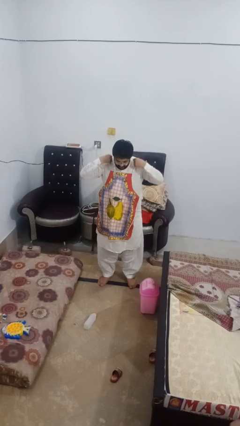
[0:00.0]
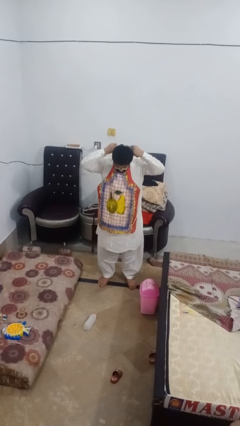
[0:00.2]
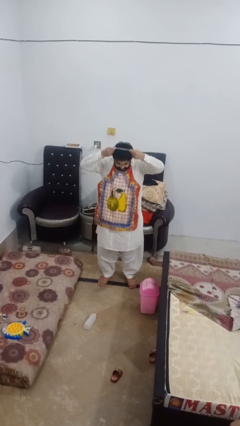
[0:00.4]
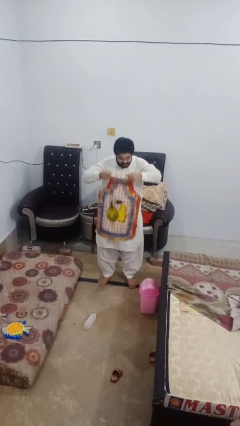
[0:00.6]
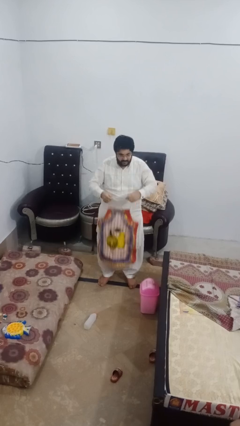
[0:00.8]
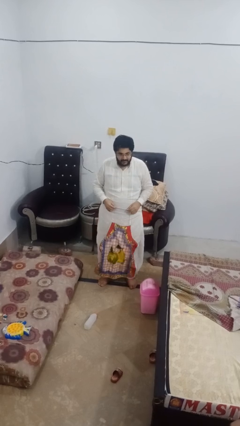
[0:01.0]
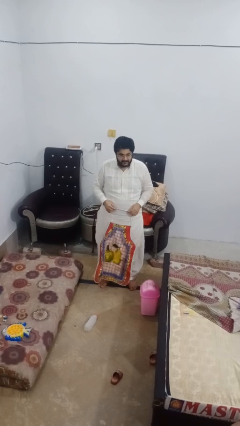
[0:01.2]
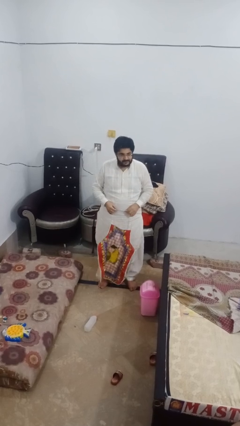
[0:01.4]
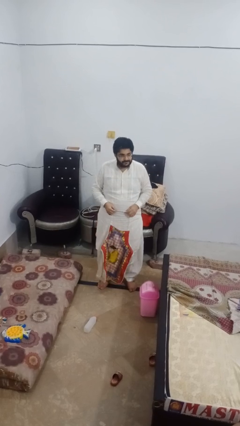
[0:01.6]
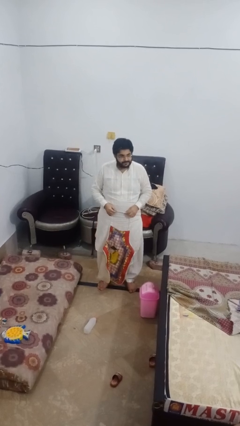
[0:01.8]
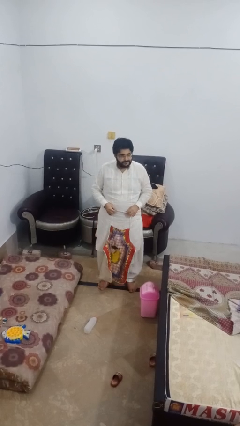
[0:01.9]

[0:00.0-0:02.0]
person takes off apron

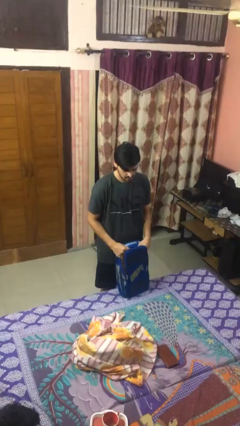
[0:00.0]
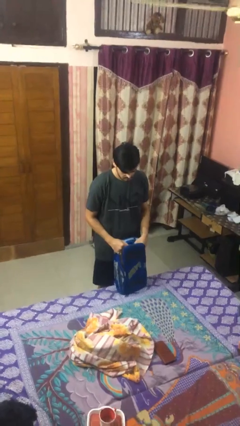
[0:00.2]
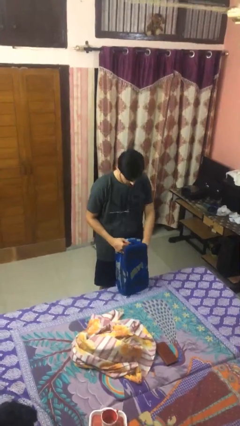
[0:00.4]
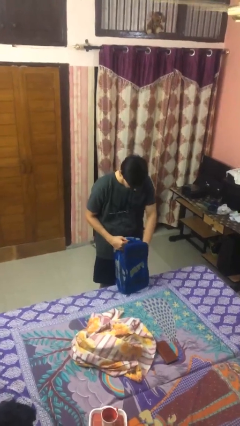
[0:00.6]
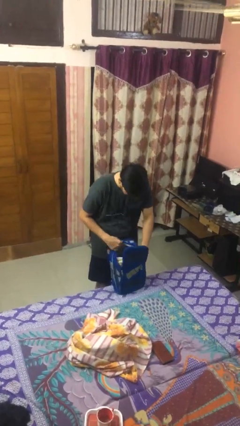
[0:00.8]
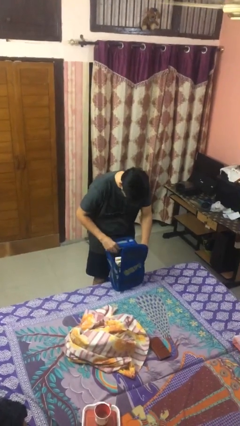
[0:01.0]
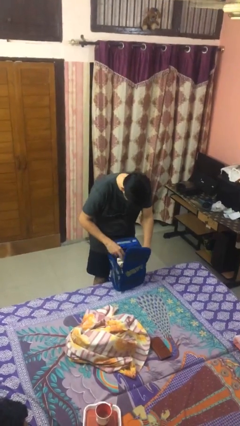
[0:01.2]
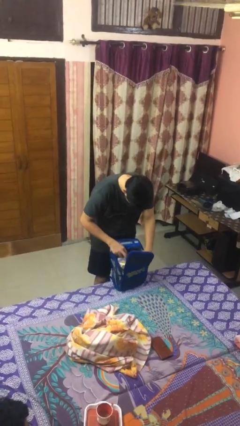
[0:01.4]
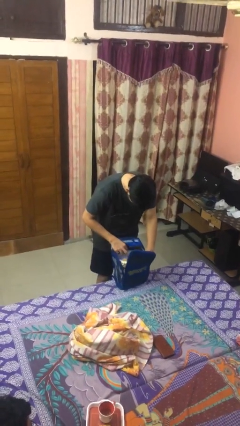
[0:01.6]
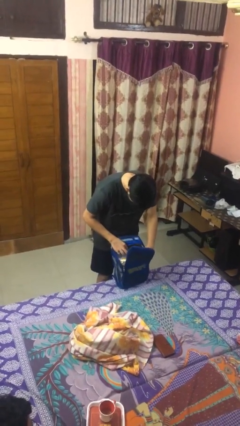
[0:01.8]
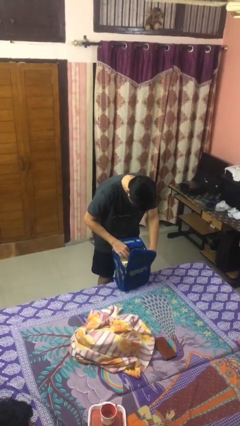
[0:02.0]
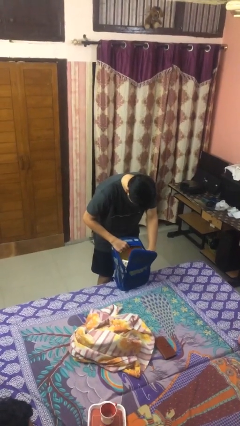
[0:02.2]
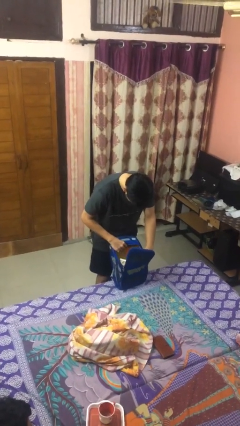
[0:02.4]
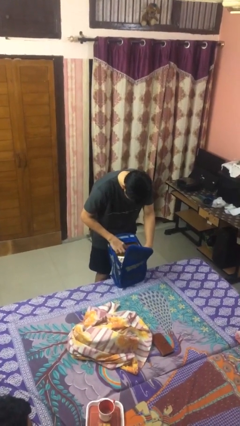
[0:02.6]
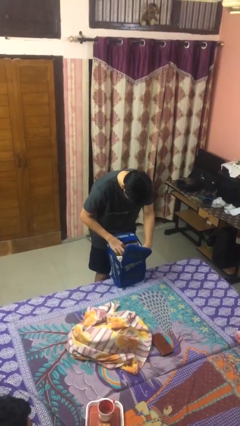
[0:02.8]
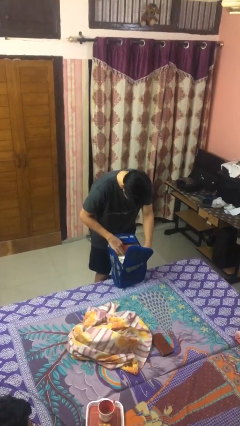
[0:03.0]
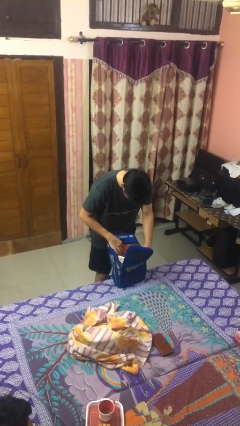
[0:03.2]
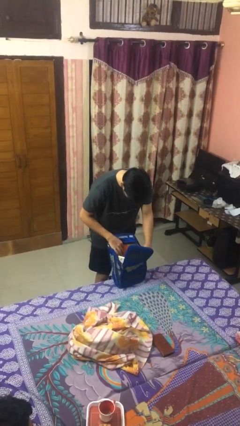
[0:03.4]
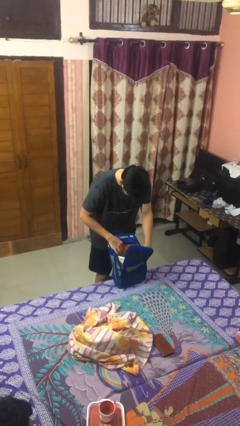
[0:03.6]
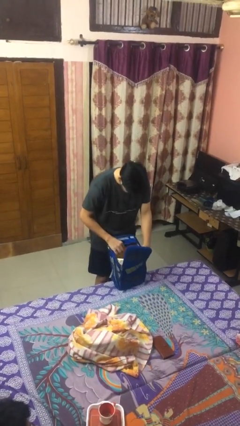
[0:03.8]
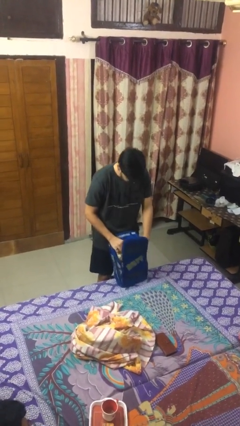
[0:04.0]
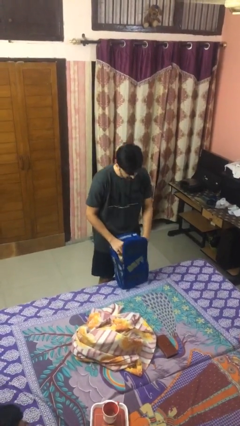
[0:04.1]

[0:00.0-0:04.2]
person searches in bag

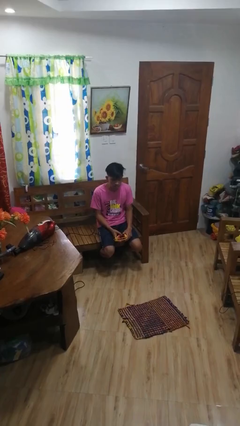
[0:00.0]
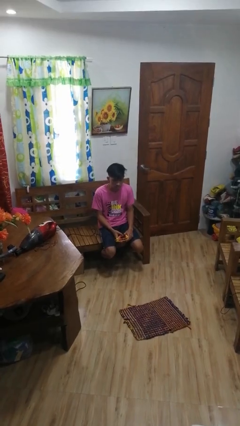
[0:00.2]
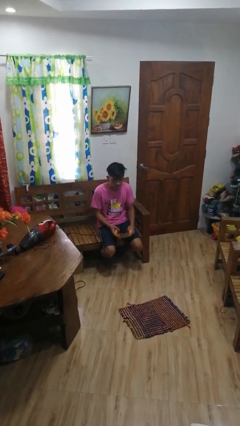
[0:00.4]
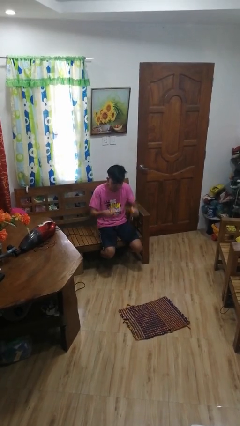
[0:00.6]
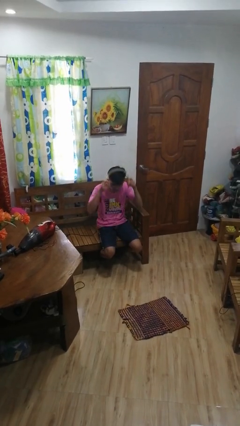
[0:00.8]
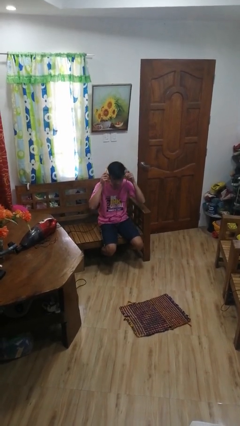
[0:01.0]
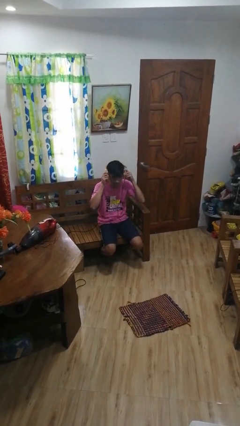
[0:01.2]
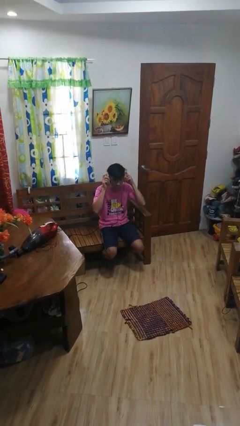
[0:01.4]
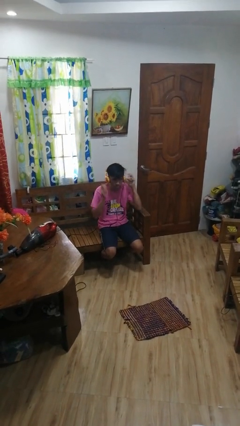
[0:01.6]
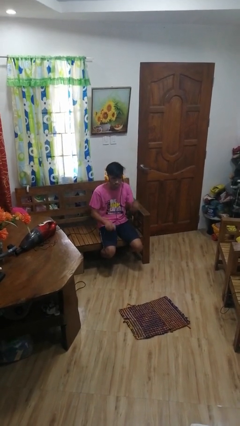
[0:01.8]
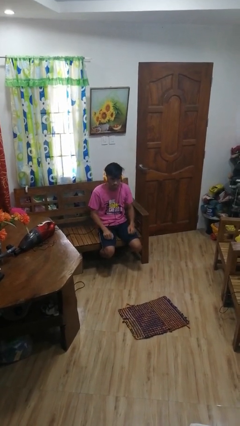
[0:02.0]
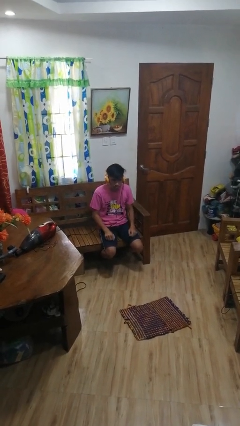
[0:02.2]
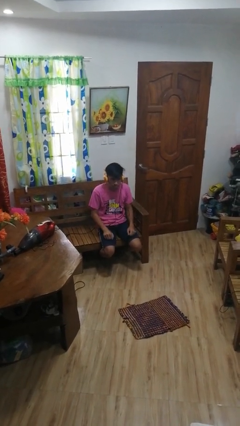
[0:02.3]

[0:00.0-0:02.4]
person puts on headphones

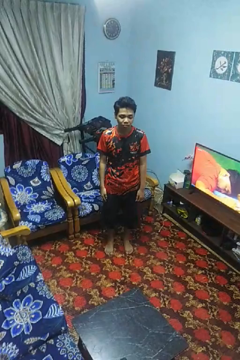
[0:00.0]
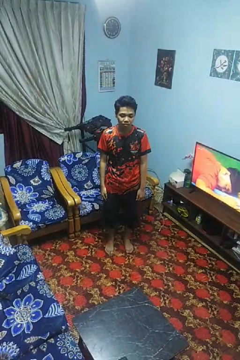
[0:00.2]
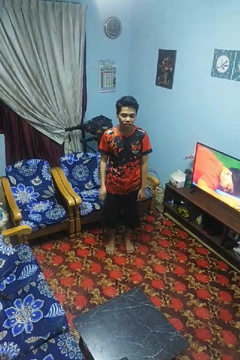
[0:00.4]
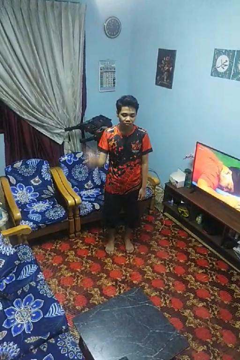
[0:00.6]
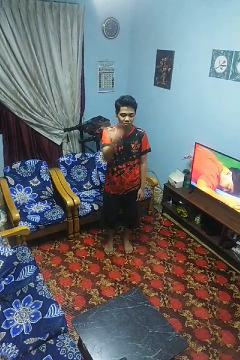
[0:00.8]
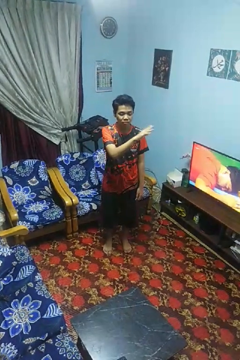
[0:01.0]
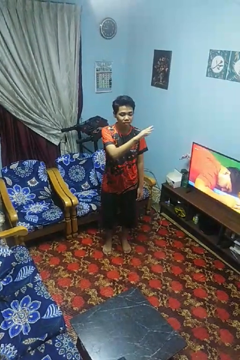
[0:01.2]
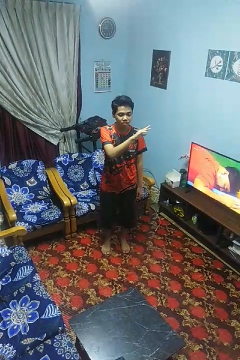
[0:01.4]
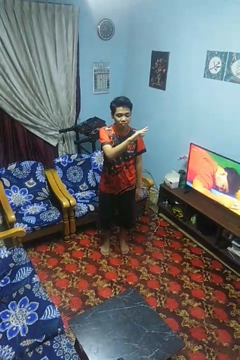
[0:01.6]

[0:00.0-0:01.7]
person gestures swipe left

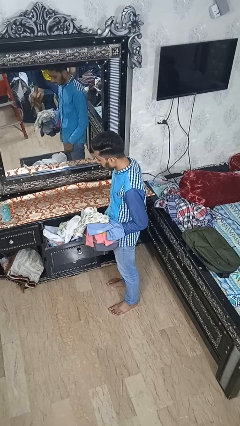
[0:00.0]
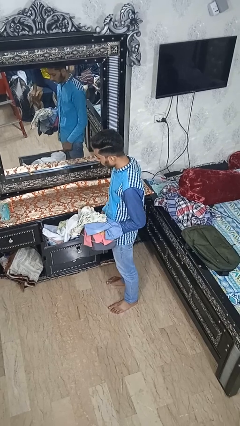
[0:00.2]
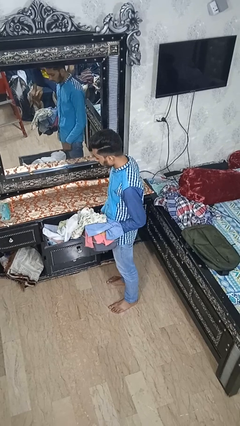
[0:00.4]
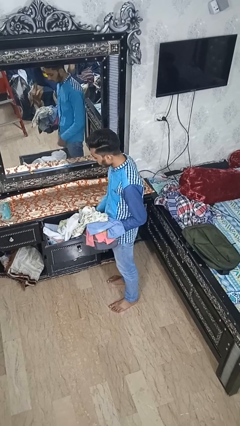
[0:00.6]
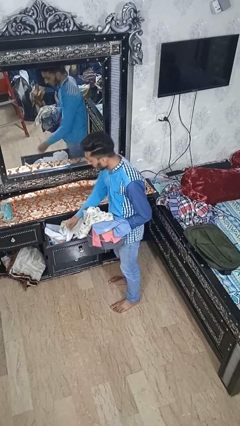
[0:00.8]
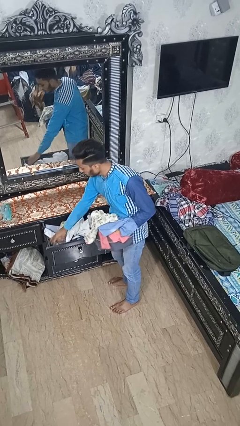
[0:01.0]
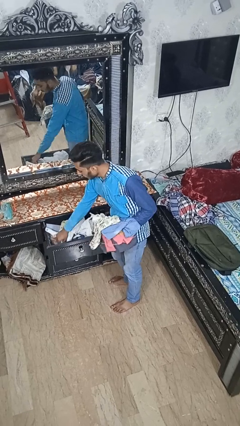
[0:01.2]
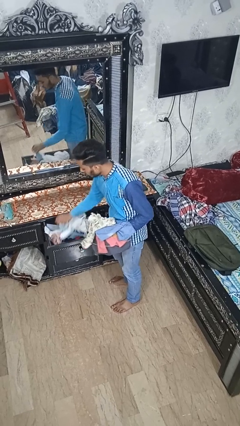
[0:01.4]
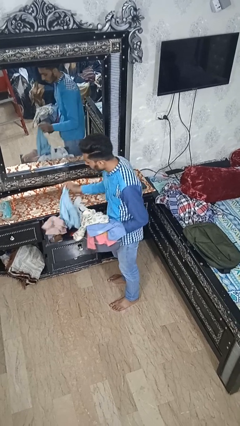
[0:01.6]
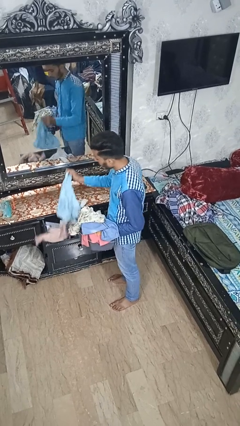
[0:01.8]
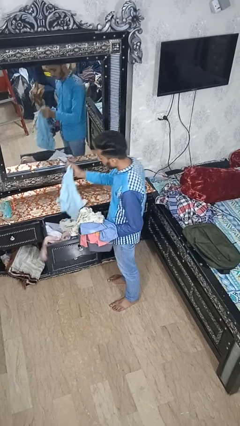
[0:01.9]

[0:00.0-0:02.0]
person takes clothes from dresser

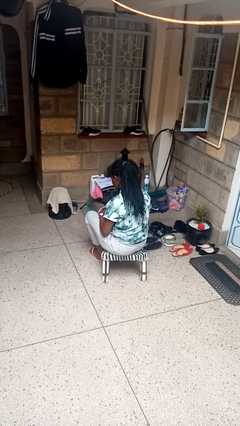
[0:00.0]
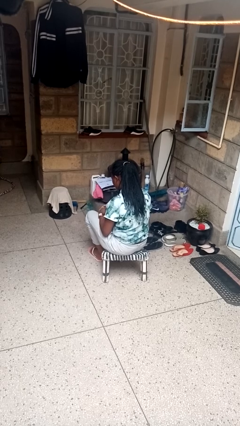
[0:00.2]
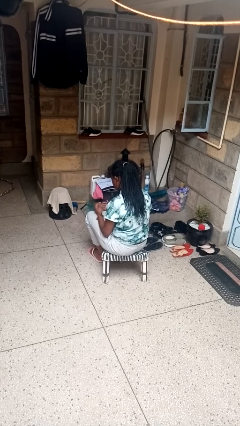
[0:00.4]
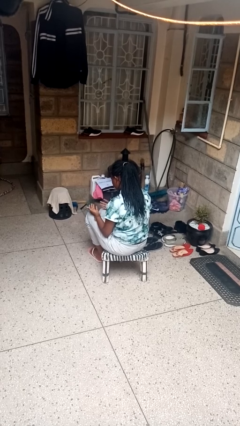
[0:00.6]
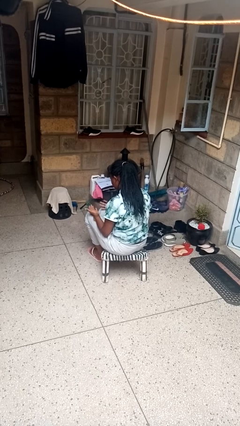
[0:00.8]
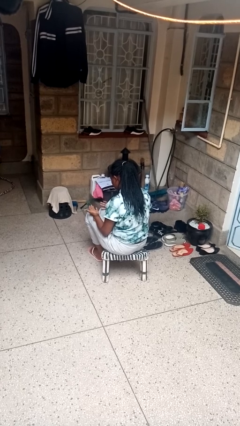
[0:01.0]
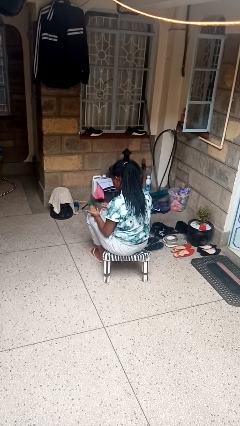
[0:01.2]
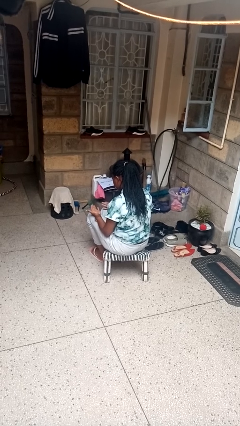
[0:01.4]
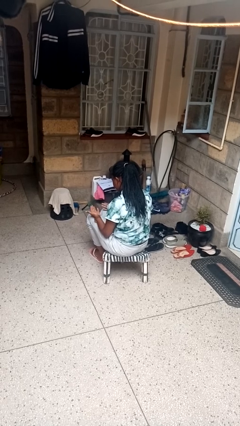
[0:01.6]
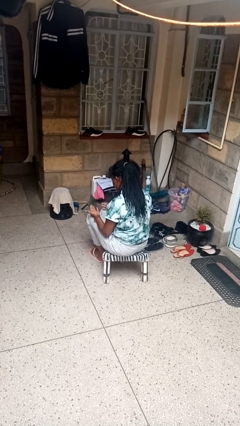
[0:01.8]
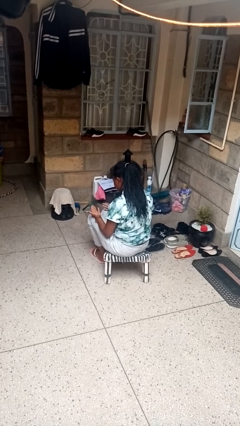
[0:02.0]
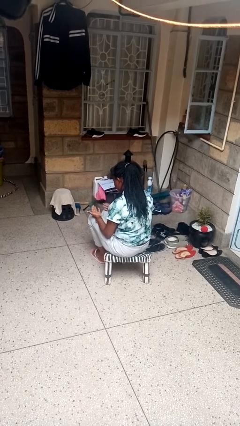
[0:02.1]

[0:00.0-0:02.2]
person looks at hands in lap

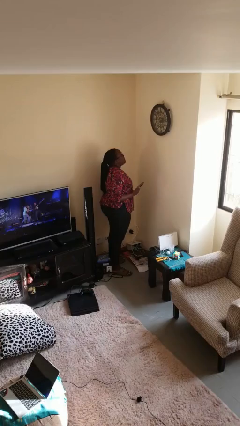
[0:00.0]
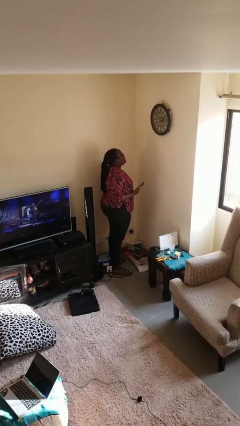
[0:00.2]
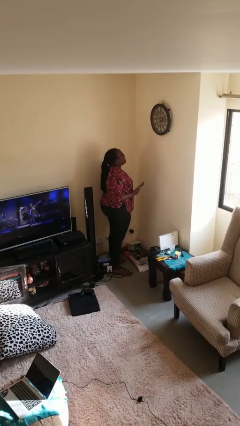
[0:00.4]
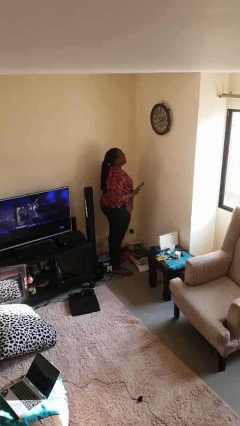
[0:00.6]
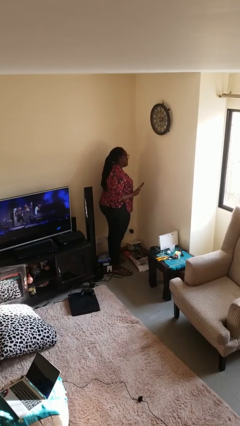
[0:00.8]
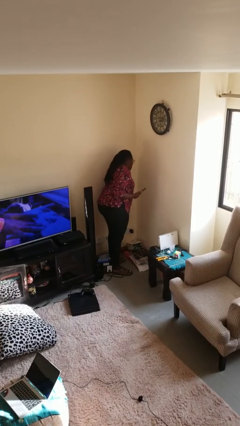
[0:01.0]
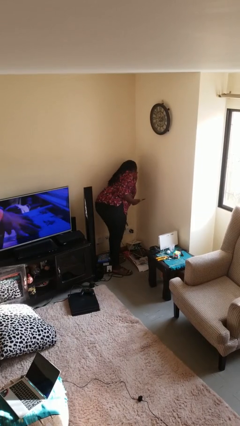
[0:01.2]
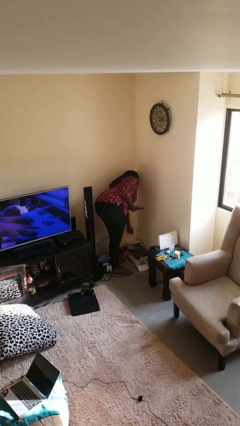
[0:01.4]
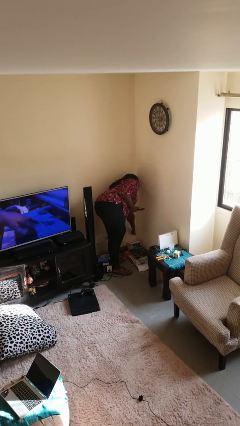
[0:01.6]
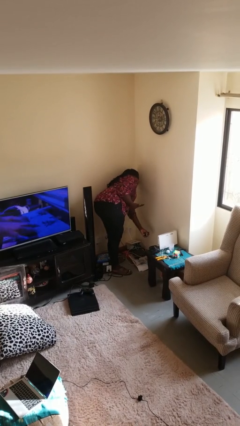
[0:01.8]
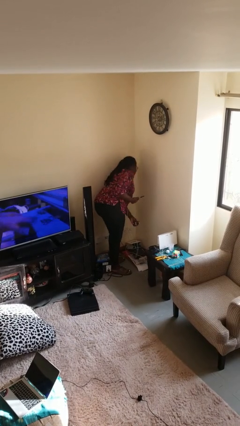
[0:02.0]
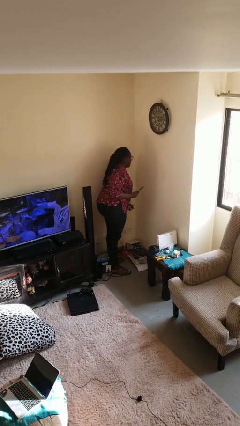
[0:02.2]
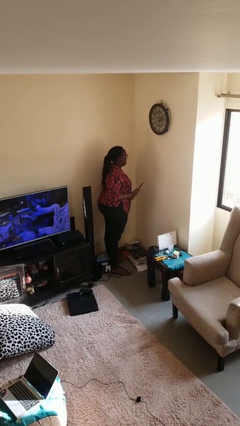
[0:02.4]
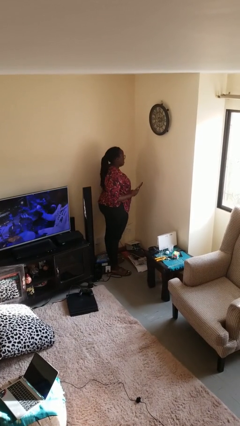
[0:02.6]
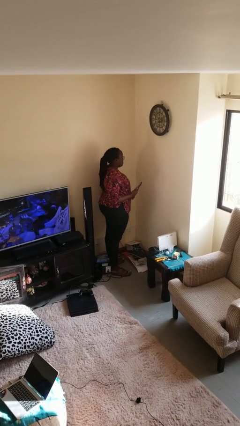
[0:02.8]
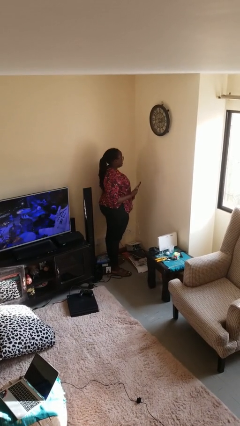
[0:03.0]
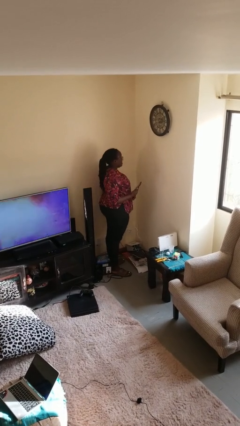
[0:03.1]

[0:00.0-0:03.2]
person unplugs from electrical socket
